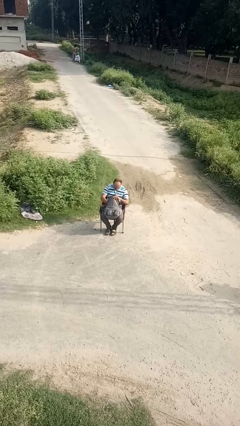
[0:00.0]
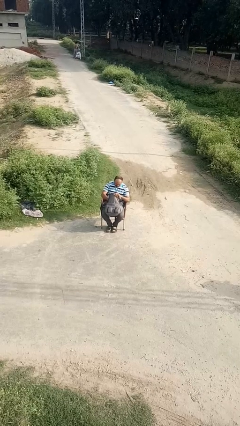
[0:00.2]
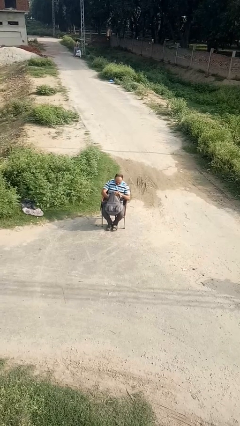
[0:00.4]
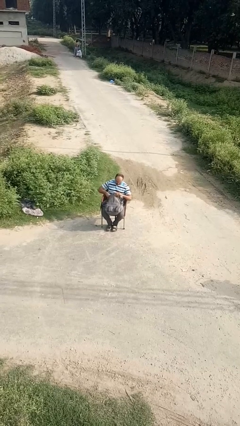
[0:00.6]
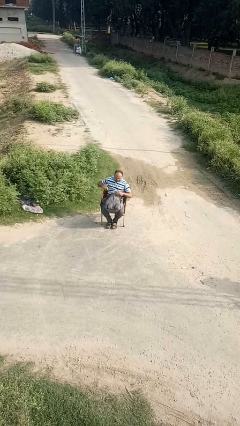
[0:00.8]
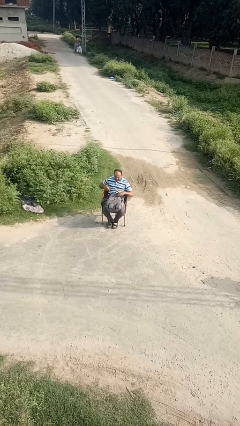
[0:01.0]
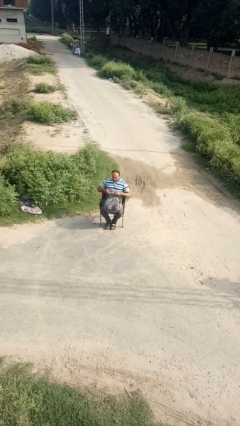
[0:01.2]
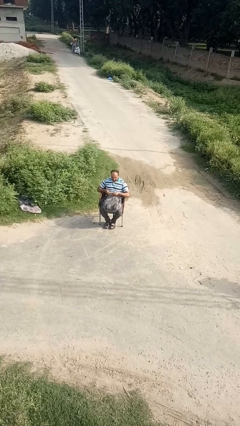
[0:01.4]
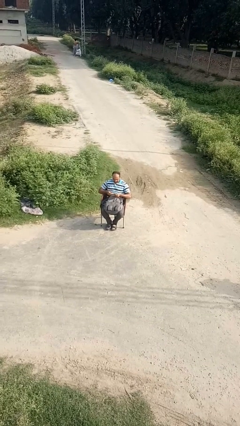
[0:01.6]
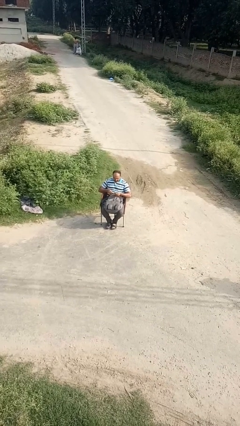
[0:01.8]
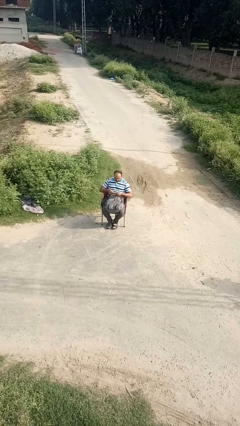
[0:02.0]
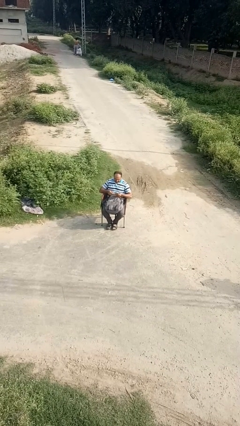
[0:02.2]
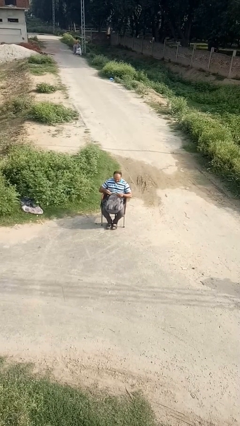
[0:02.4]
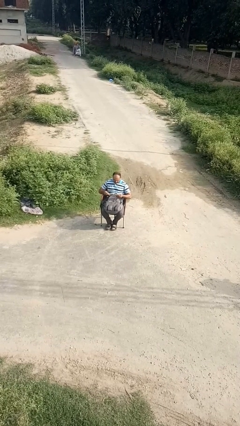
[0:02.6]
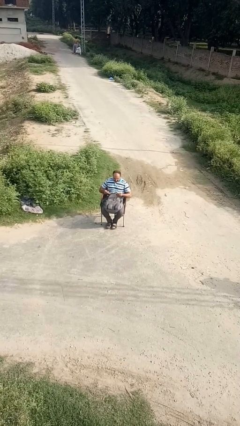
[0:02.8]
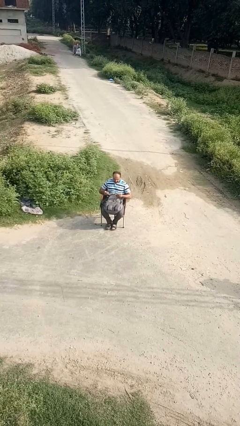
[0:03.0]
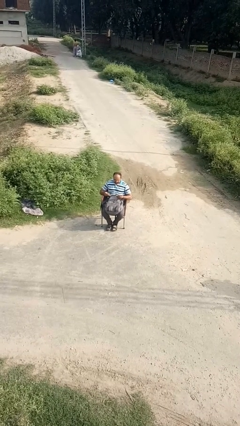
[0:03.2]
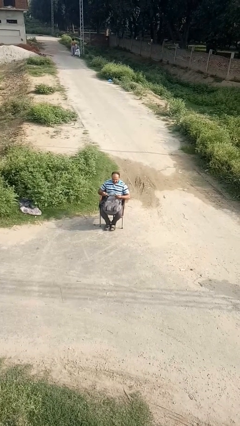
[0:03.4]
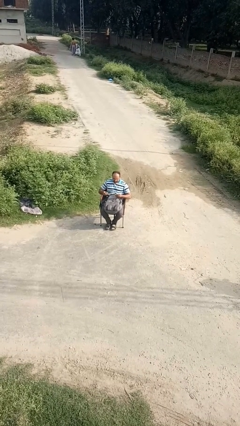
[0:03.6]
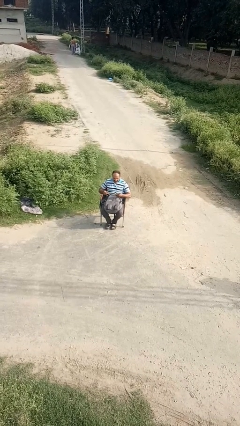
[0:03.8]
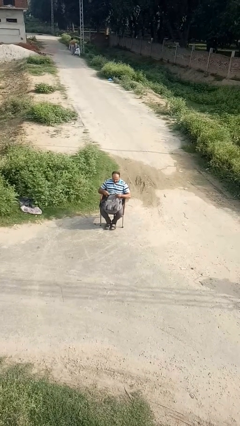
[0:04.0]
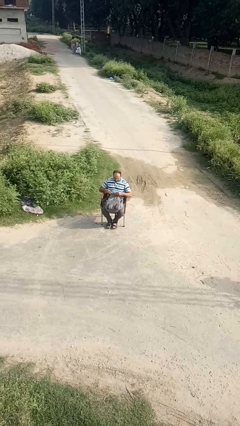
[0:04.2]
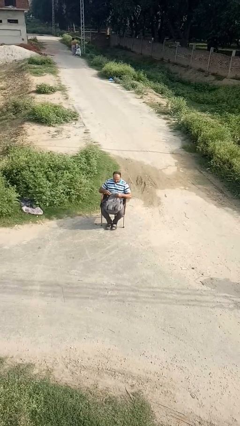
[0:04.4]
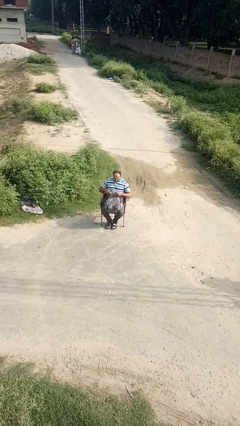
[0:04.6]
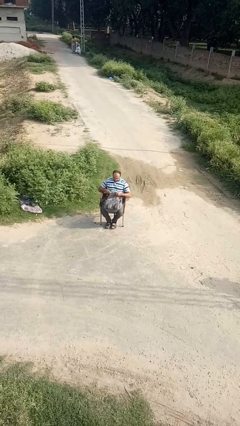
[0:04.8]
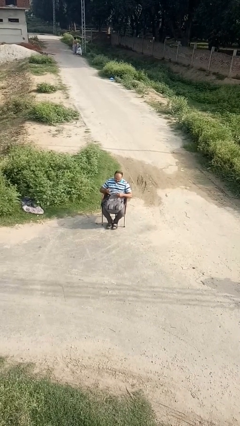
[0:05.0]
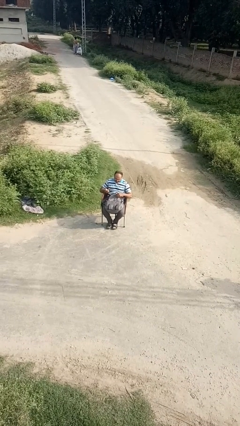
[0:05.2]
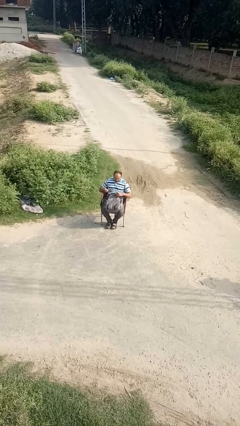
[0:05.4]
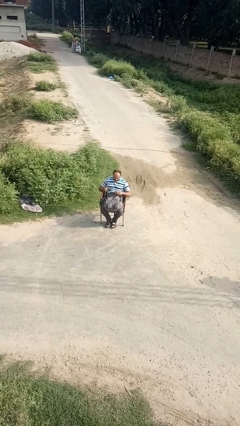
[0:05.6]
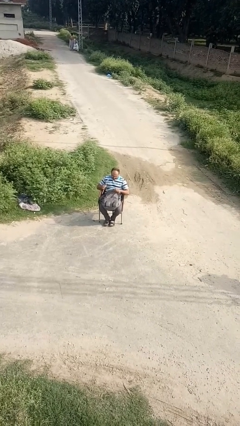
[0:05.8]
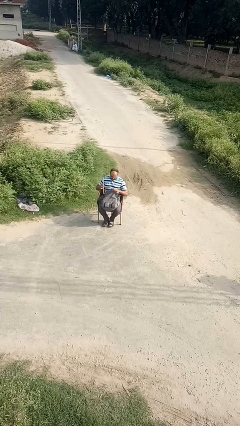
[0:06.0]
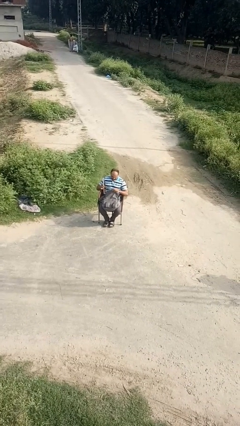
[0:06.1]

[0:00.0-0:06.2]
person takes object from backpack

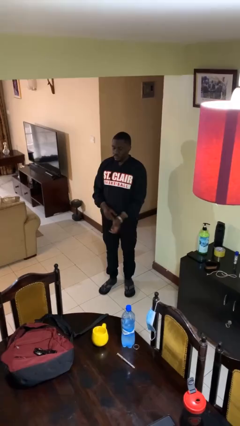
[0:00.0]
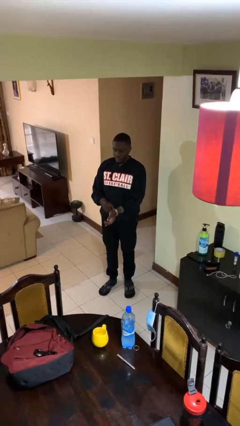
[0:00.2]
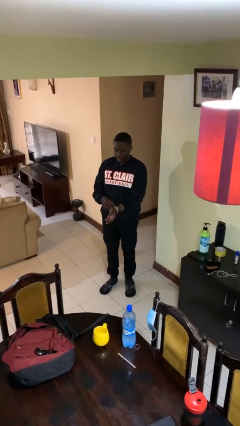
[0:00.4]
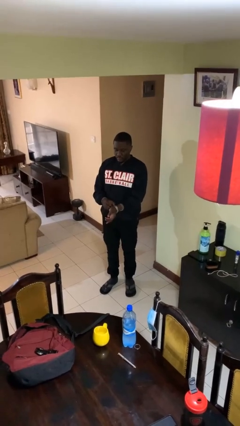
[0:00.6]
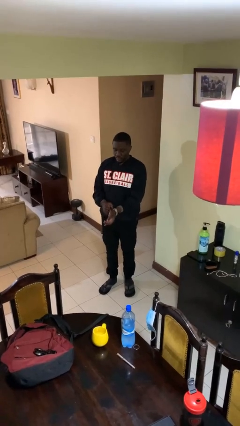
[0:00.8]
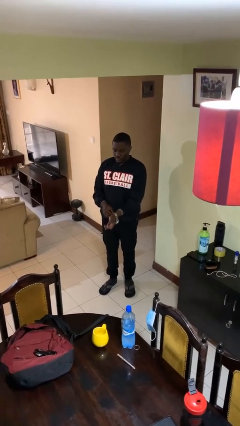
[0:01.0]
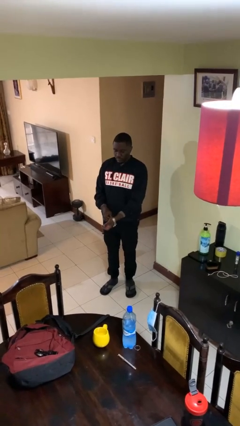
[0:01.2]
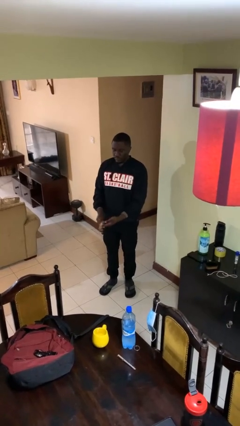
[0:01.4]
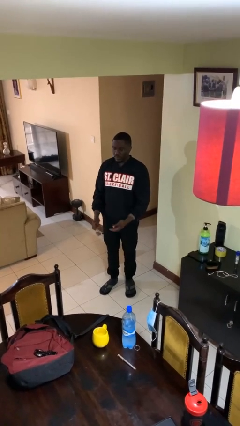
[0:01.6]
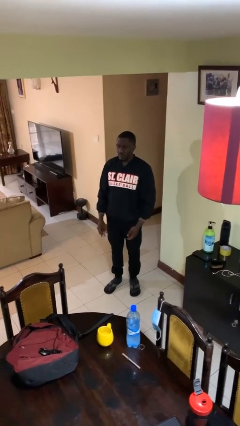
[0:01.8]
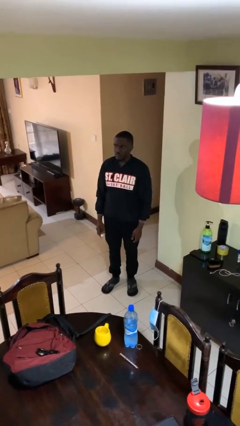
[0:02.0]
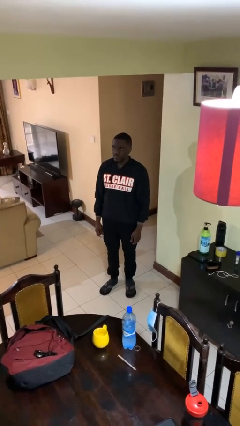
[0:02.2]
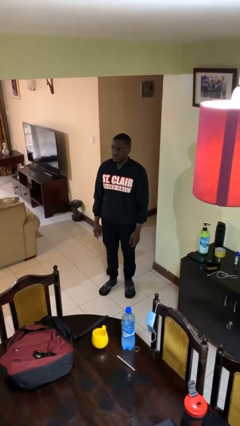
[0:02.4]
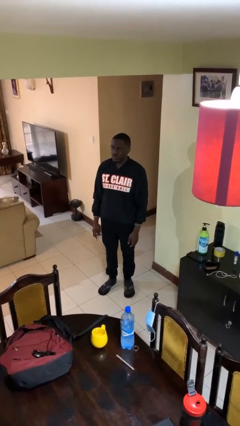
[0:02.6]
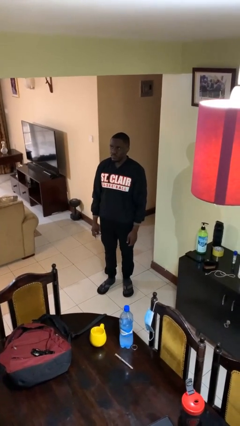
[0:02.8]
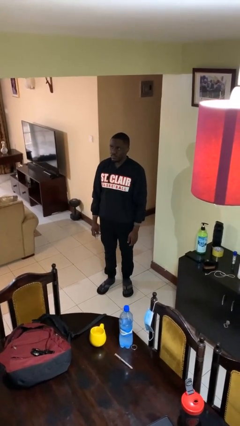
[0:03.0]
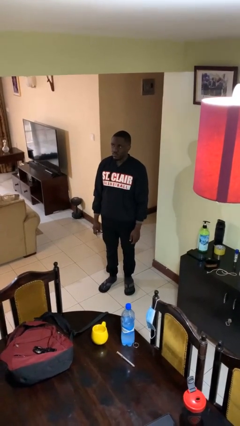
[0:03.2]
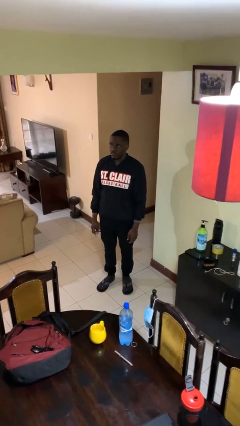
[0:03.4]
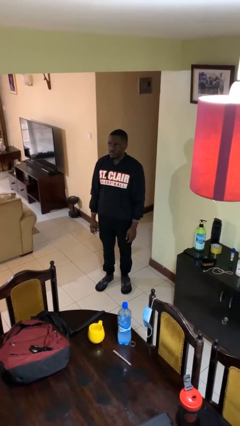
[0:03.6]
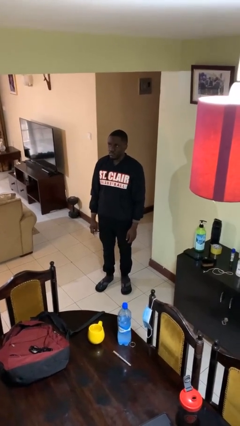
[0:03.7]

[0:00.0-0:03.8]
person takes off wristwatch

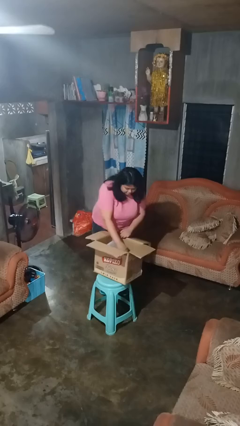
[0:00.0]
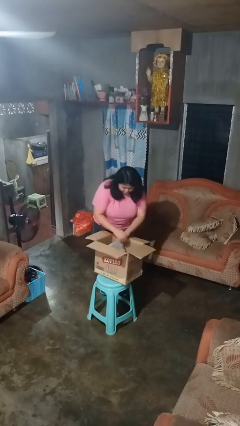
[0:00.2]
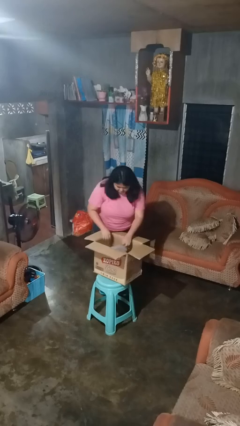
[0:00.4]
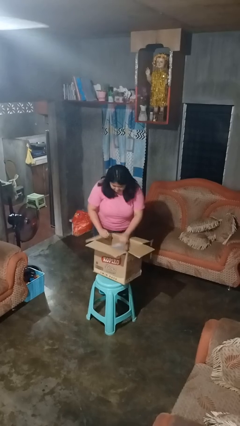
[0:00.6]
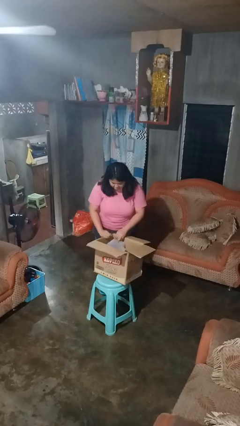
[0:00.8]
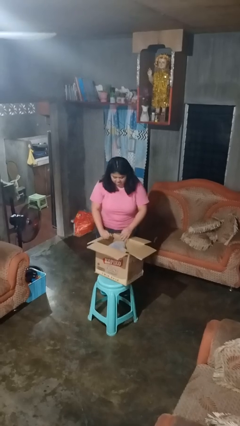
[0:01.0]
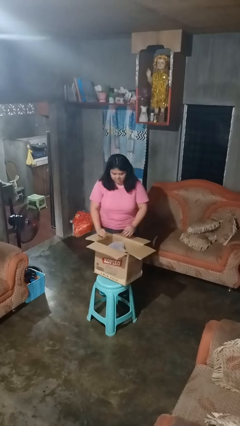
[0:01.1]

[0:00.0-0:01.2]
person searches in box

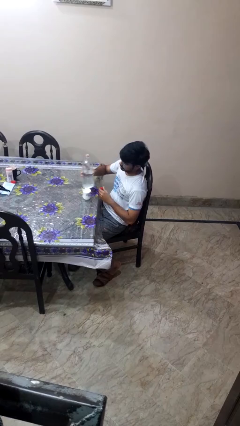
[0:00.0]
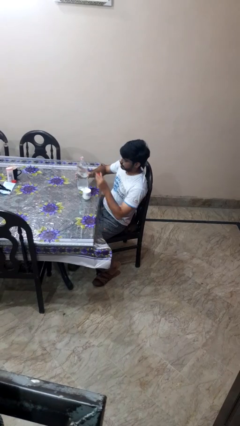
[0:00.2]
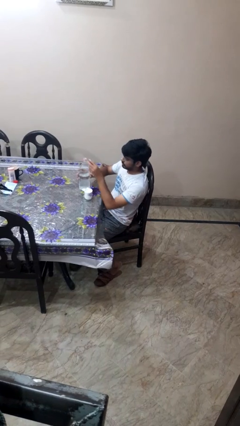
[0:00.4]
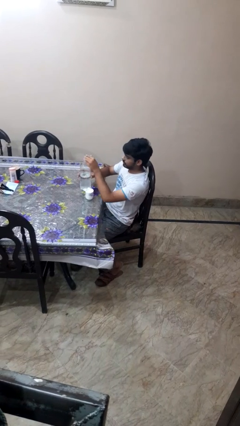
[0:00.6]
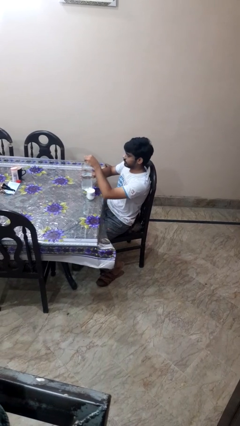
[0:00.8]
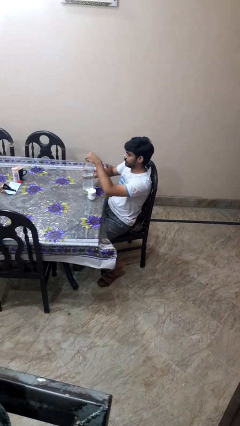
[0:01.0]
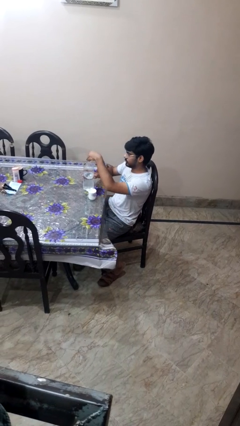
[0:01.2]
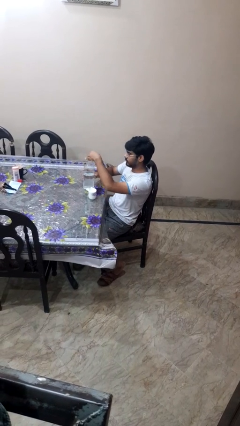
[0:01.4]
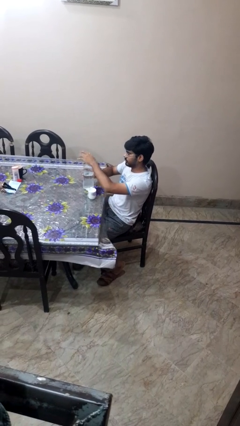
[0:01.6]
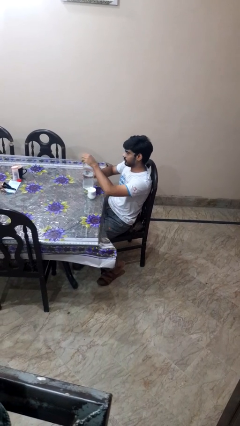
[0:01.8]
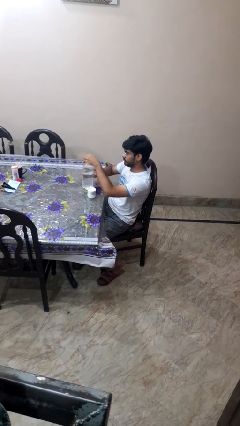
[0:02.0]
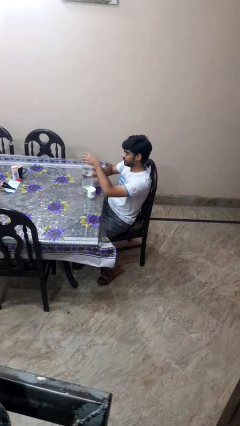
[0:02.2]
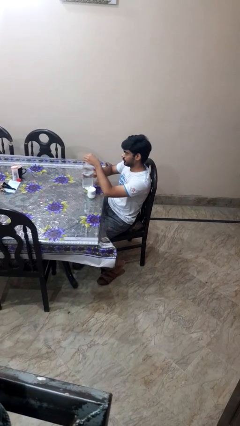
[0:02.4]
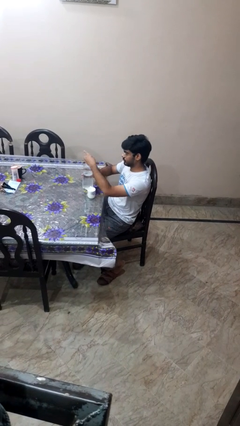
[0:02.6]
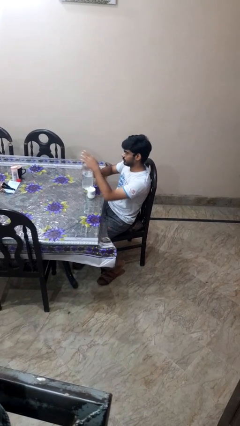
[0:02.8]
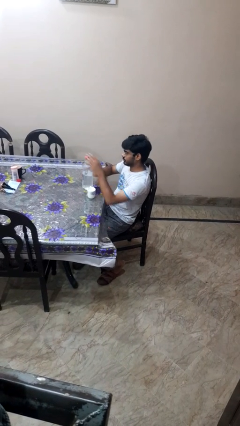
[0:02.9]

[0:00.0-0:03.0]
person screws lid to bottle

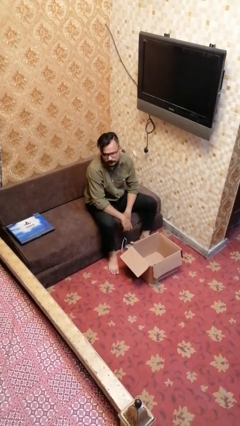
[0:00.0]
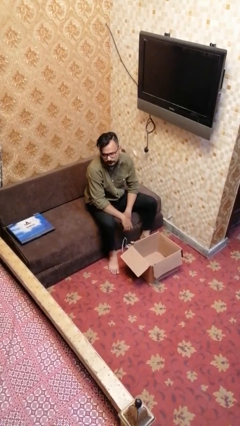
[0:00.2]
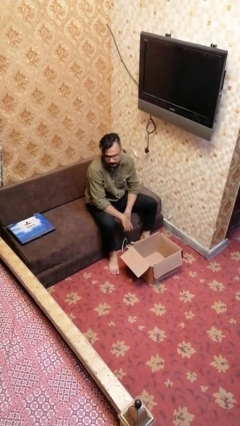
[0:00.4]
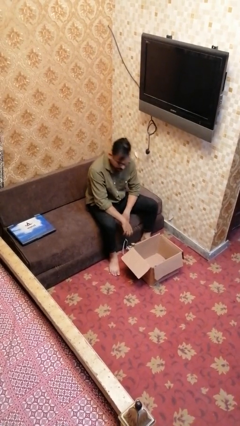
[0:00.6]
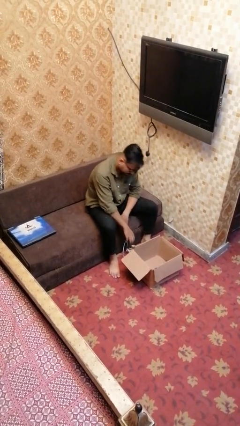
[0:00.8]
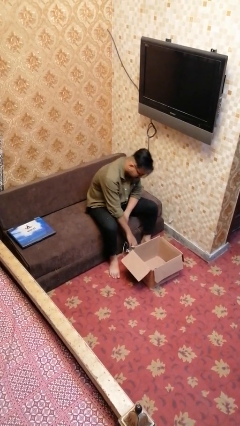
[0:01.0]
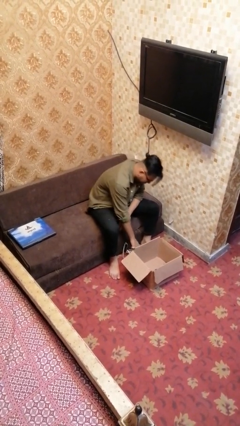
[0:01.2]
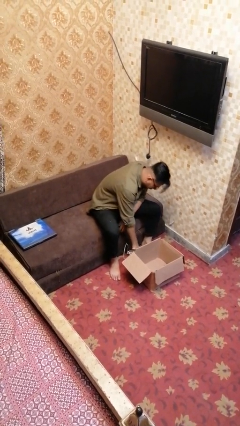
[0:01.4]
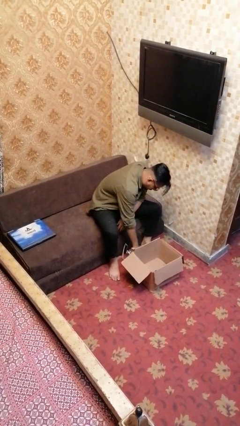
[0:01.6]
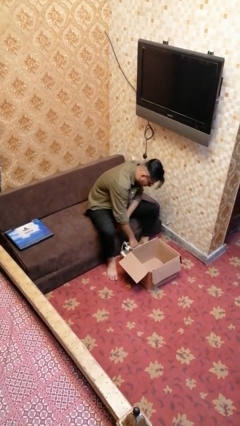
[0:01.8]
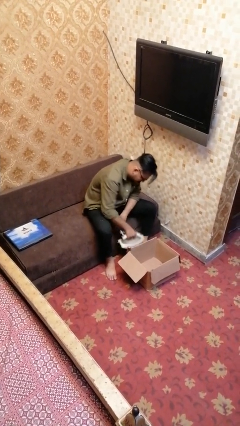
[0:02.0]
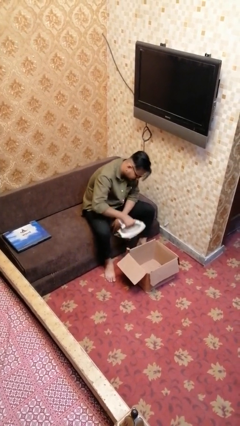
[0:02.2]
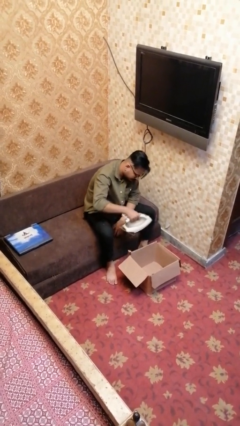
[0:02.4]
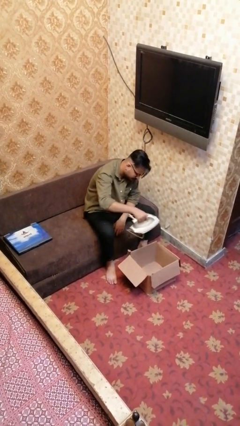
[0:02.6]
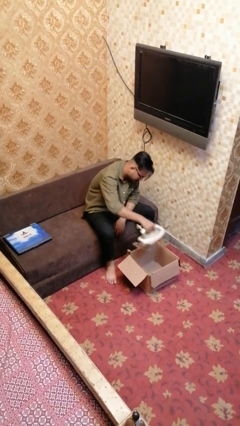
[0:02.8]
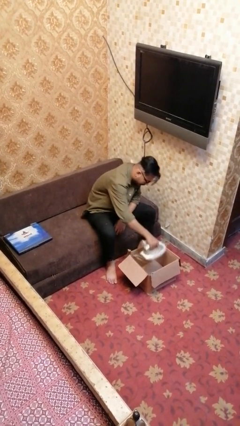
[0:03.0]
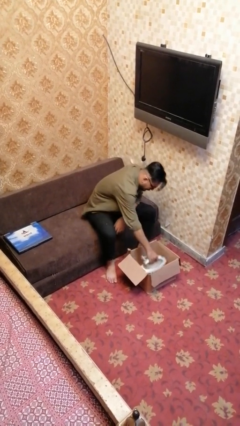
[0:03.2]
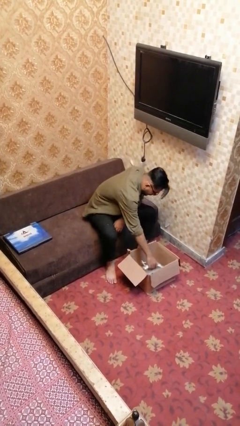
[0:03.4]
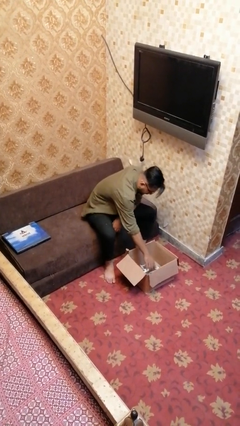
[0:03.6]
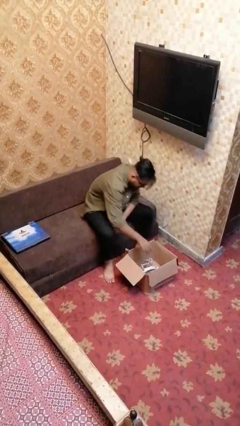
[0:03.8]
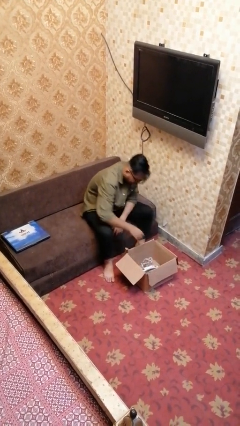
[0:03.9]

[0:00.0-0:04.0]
person puts object into box
